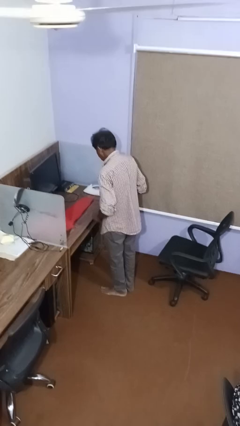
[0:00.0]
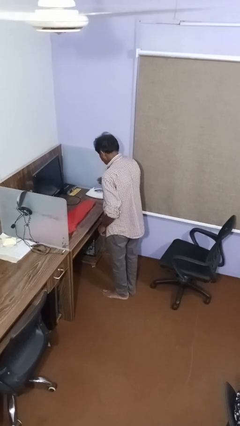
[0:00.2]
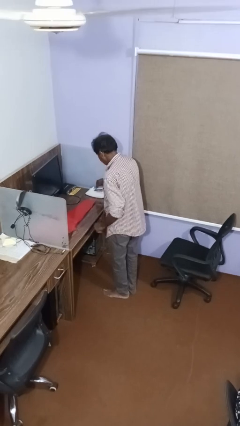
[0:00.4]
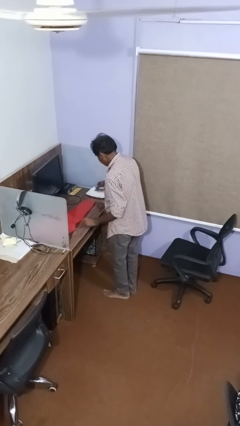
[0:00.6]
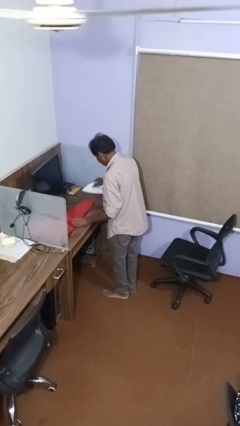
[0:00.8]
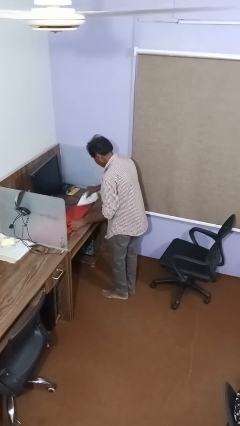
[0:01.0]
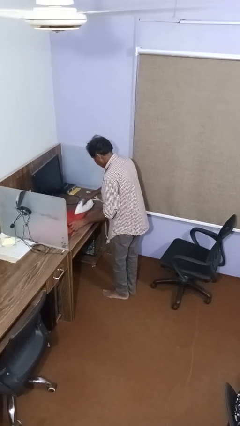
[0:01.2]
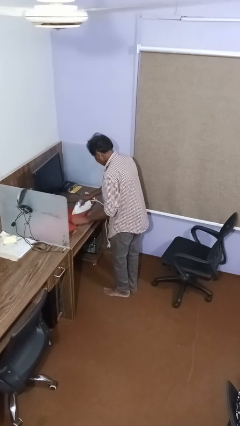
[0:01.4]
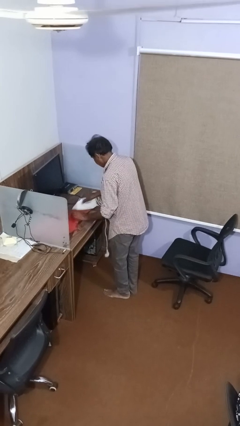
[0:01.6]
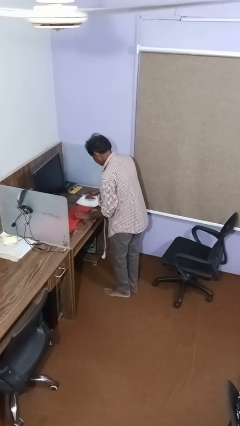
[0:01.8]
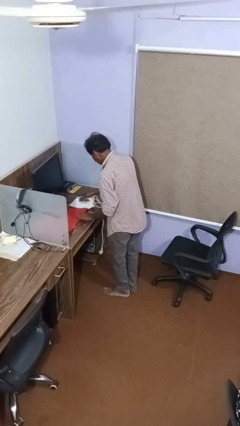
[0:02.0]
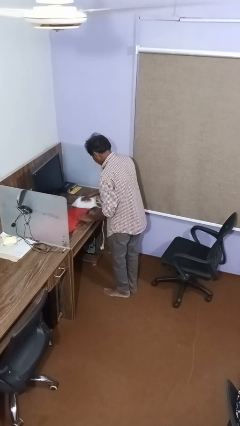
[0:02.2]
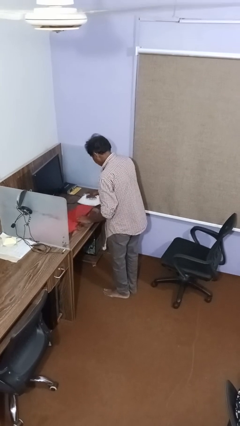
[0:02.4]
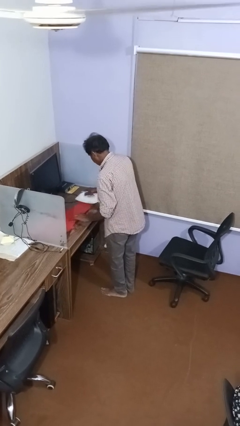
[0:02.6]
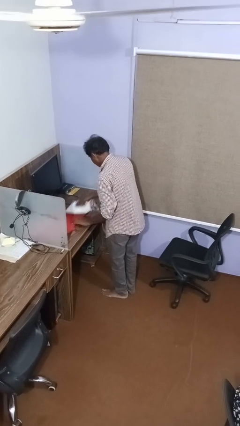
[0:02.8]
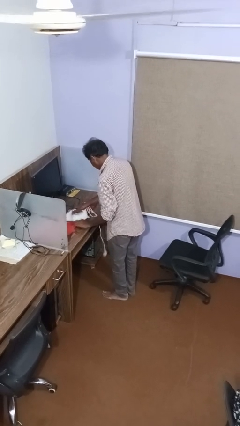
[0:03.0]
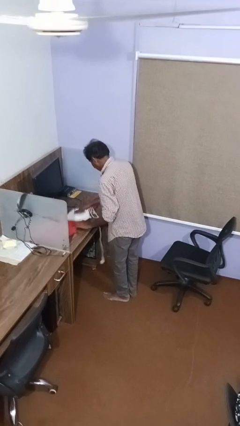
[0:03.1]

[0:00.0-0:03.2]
person irons clothes

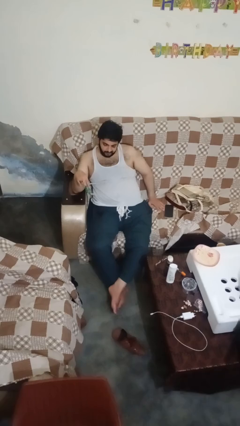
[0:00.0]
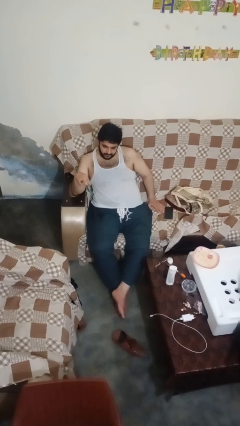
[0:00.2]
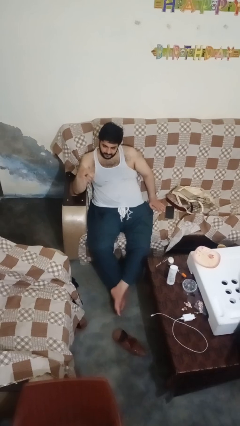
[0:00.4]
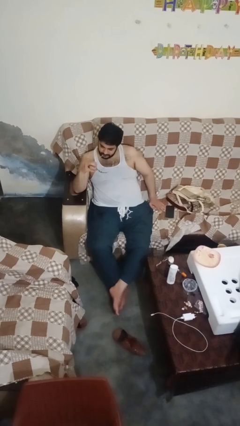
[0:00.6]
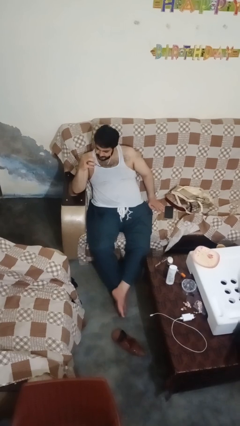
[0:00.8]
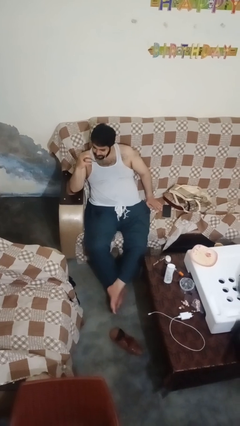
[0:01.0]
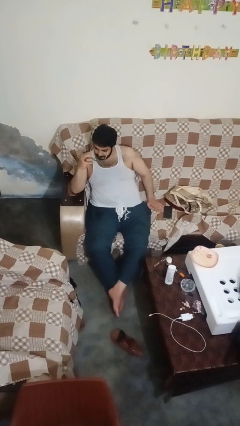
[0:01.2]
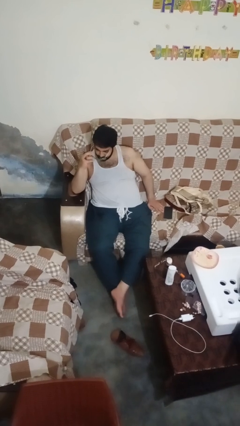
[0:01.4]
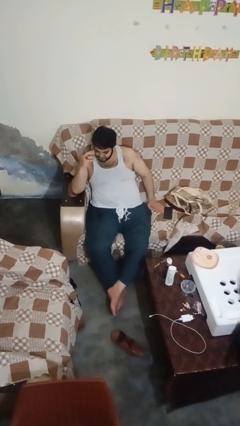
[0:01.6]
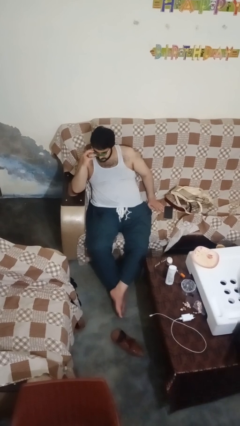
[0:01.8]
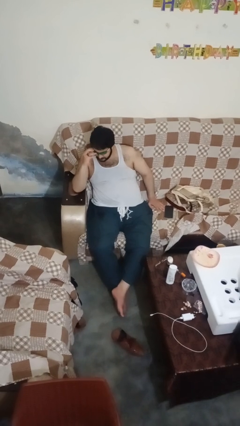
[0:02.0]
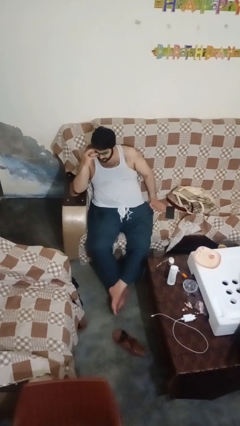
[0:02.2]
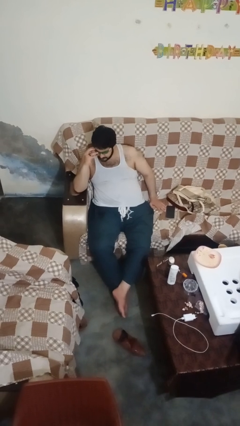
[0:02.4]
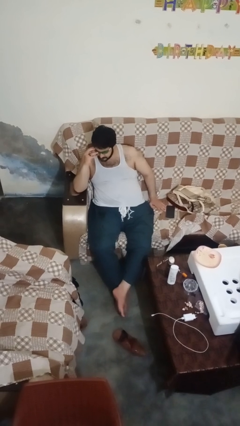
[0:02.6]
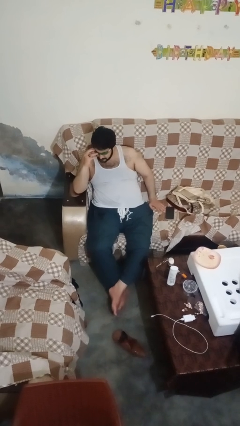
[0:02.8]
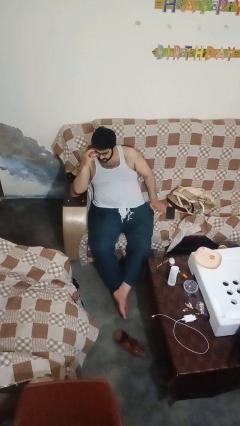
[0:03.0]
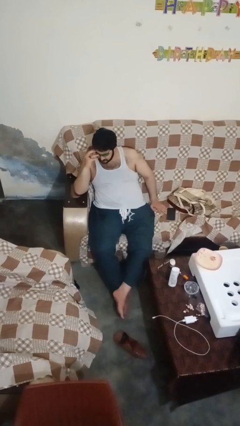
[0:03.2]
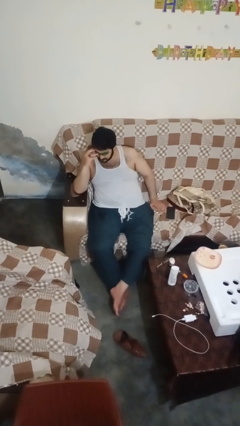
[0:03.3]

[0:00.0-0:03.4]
person puts on sunglasses

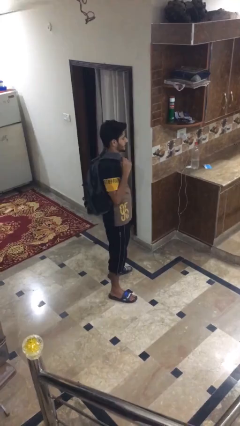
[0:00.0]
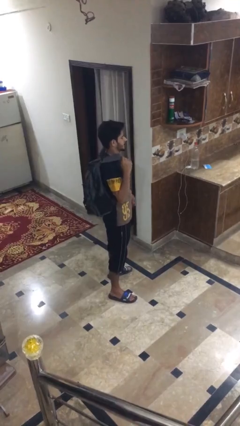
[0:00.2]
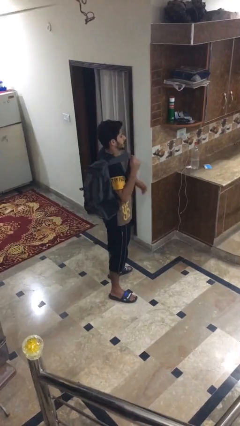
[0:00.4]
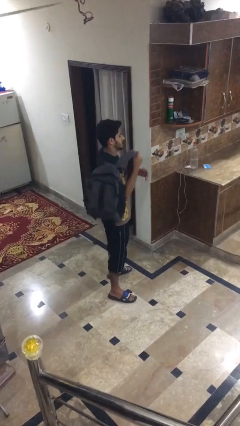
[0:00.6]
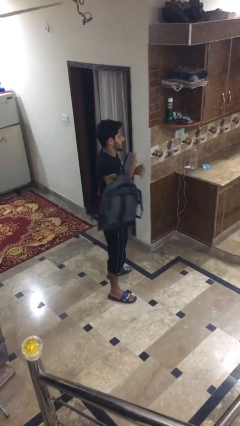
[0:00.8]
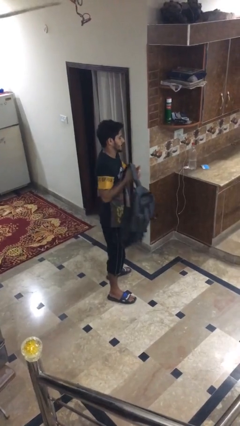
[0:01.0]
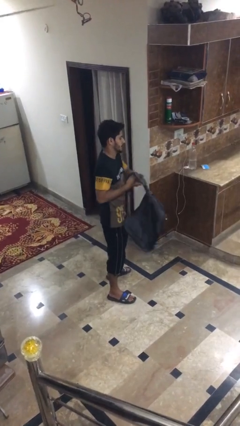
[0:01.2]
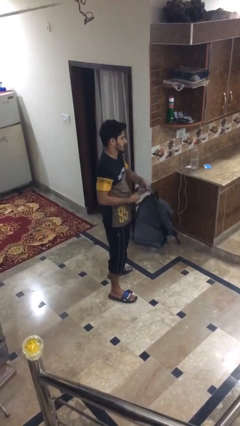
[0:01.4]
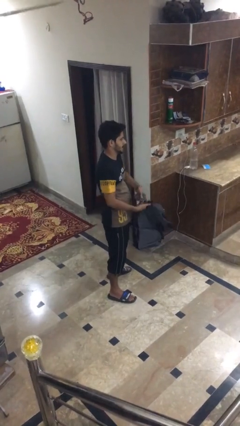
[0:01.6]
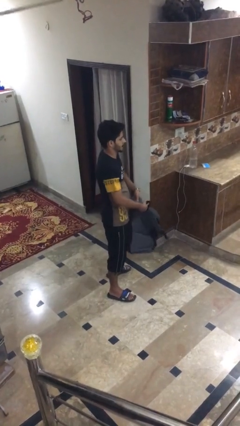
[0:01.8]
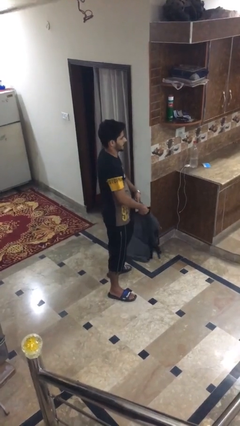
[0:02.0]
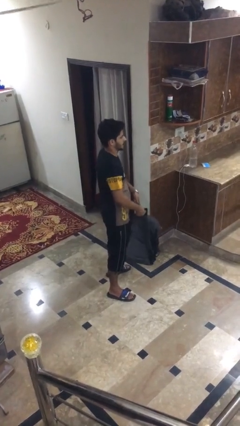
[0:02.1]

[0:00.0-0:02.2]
person takes off backpack

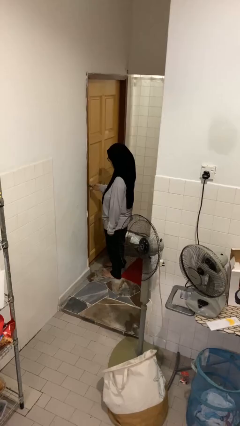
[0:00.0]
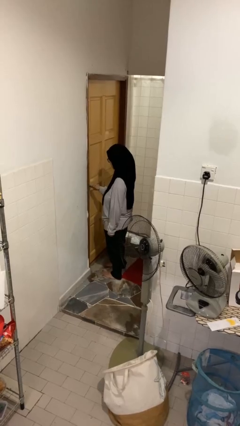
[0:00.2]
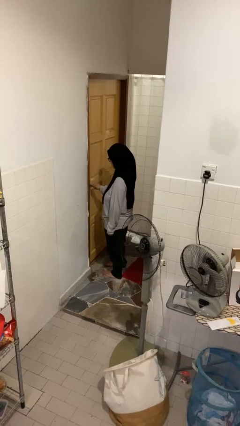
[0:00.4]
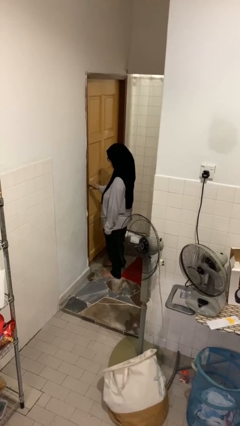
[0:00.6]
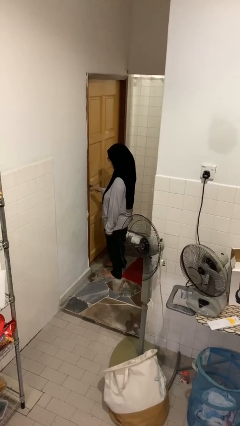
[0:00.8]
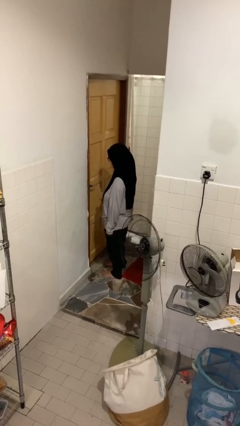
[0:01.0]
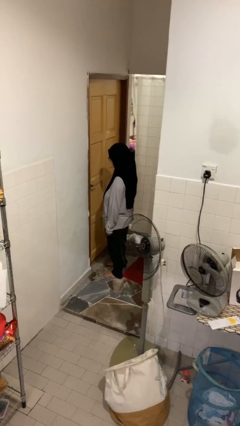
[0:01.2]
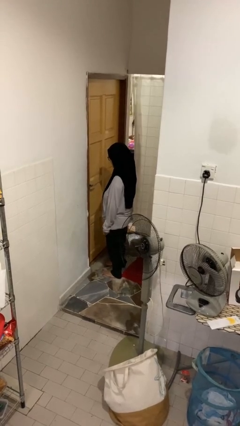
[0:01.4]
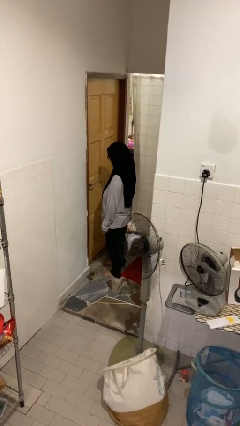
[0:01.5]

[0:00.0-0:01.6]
person locks door with keys

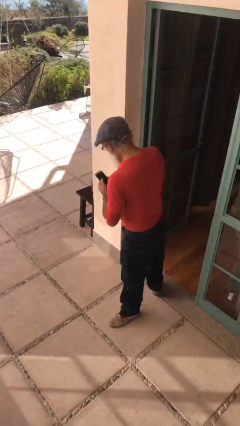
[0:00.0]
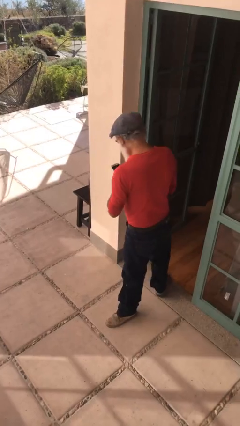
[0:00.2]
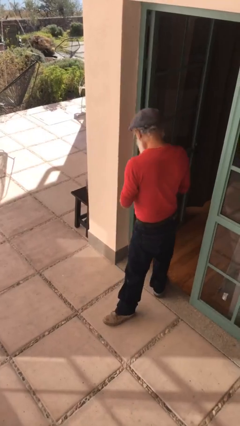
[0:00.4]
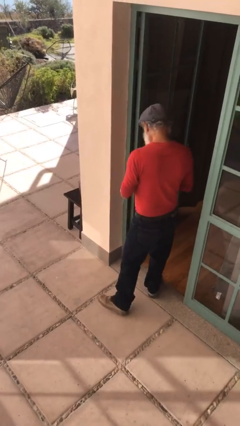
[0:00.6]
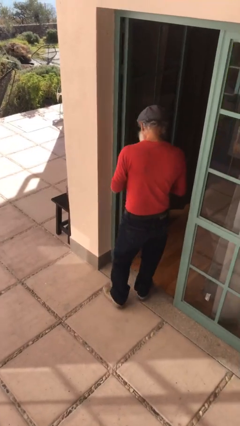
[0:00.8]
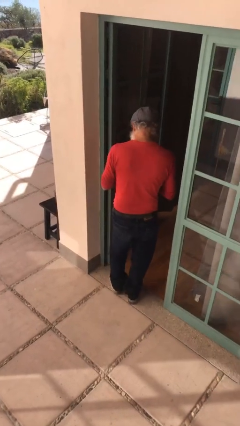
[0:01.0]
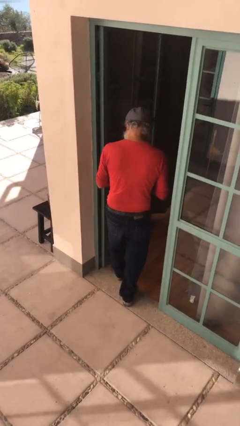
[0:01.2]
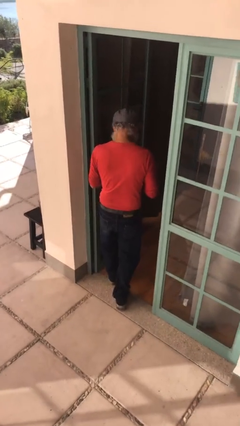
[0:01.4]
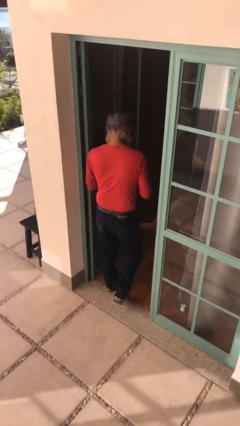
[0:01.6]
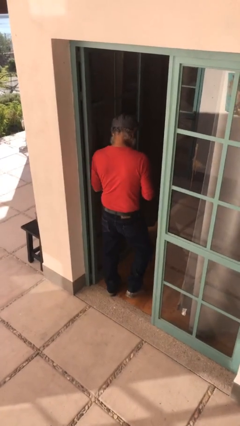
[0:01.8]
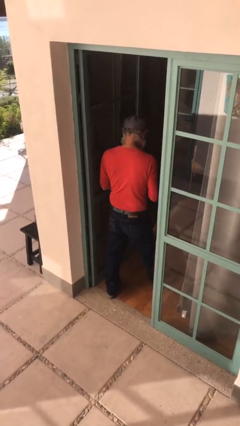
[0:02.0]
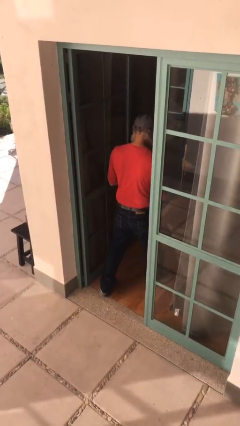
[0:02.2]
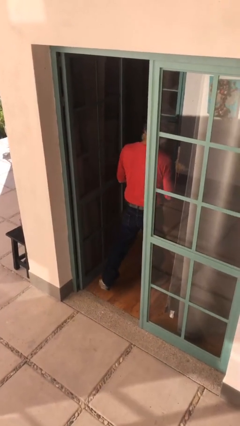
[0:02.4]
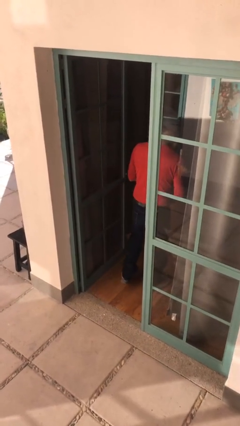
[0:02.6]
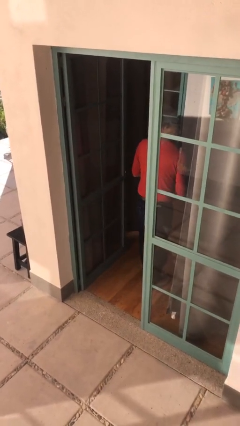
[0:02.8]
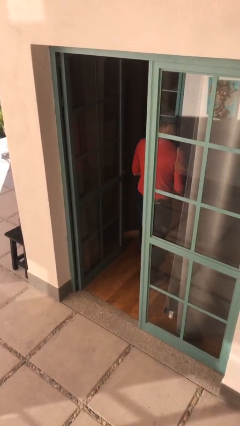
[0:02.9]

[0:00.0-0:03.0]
person exits scene through structure

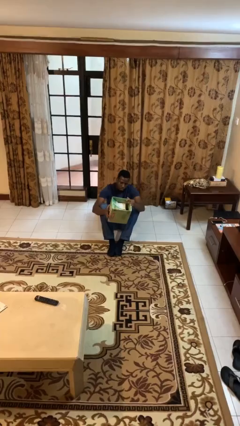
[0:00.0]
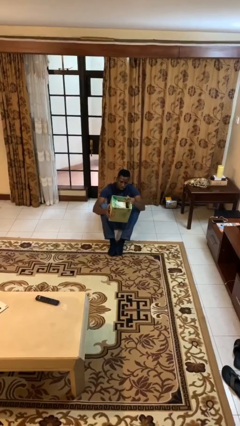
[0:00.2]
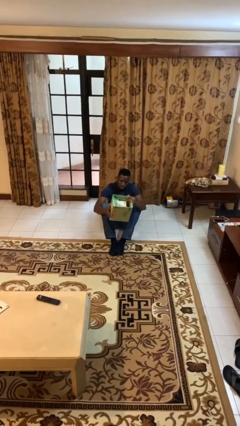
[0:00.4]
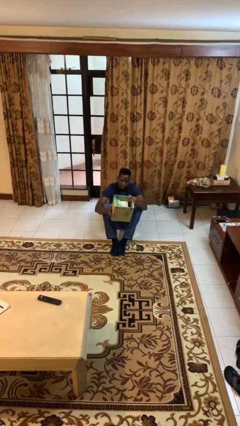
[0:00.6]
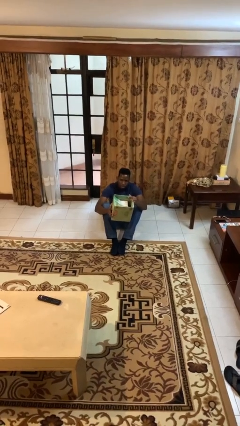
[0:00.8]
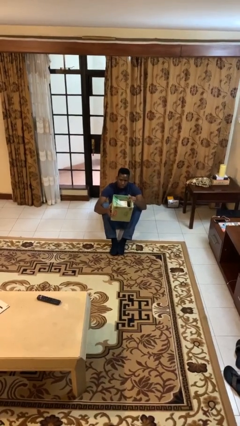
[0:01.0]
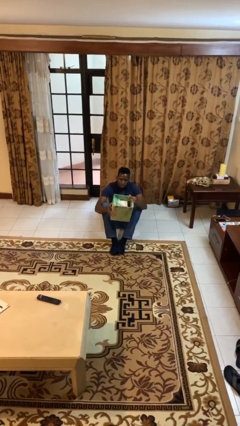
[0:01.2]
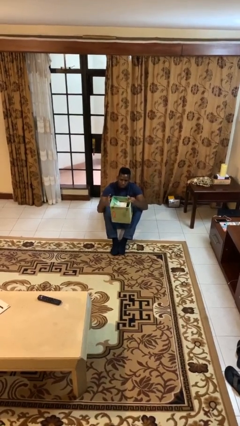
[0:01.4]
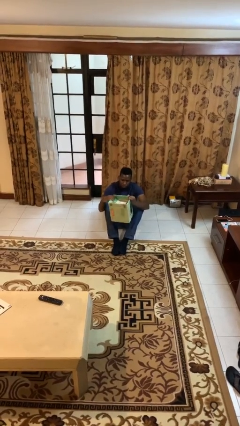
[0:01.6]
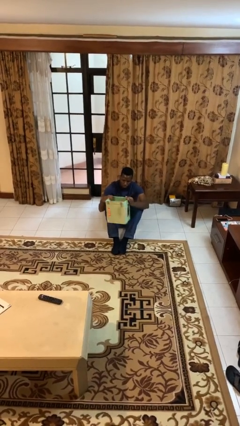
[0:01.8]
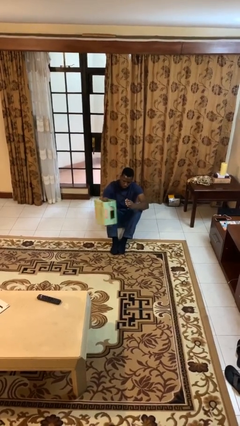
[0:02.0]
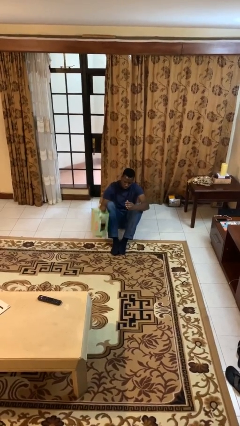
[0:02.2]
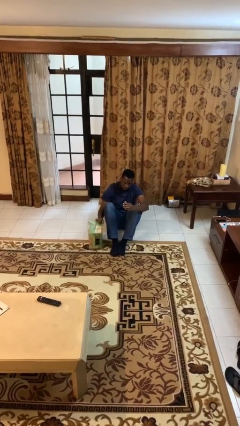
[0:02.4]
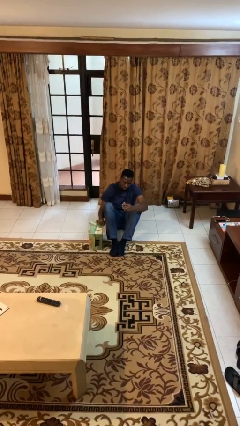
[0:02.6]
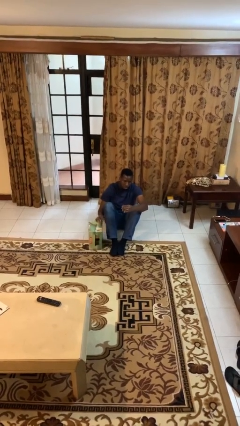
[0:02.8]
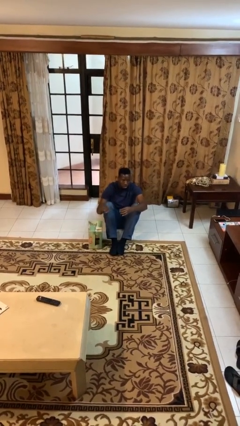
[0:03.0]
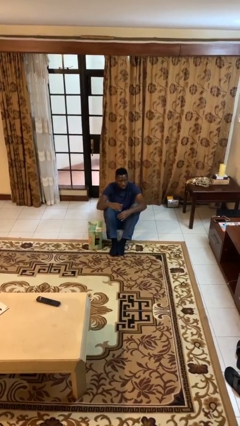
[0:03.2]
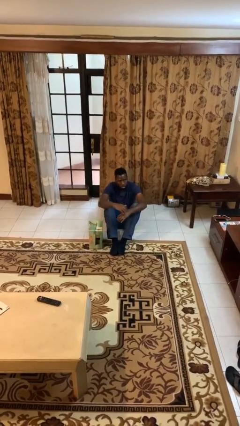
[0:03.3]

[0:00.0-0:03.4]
person puts down object on floor

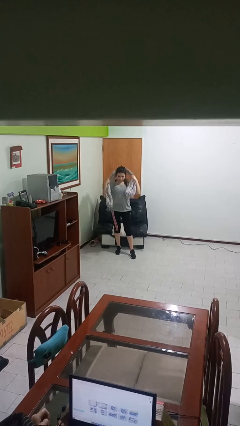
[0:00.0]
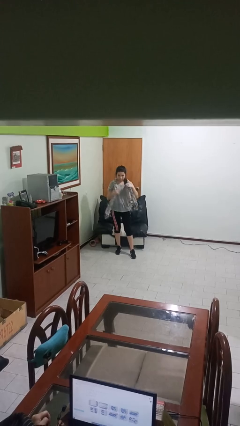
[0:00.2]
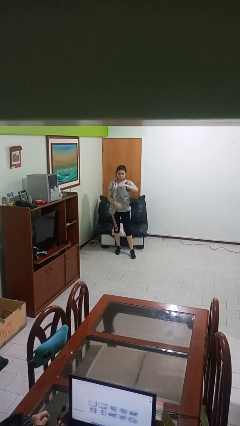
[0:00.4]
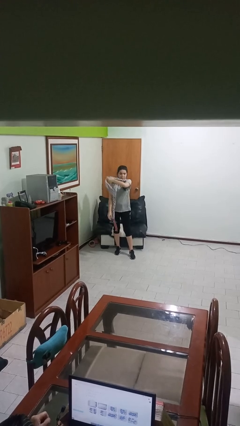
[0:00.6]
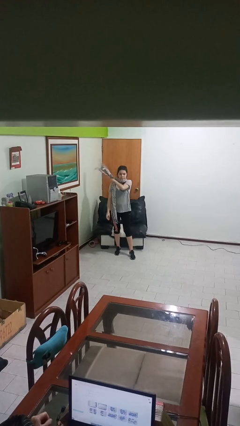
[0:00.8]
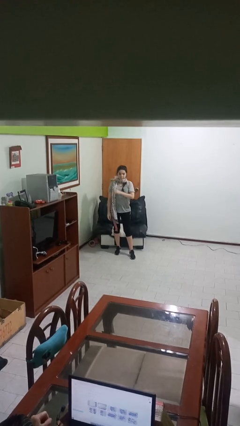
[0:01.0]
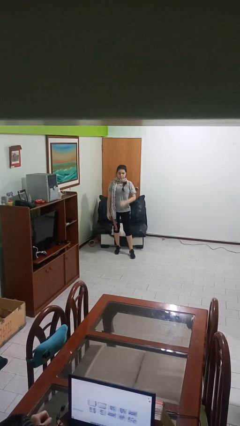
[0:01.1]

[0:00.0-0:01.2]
person puts on scarf
